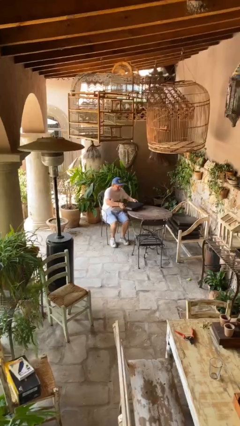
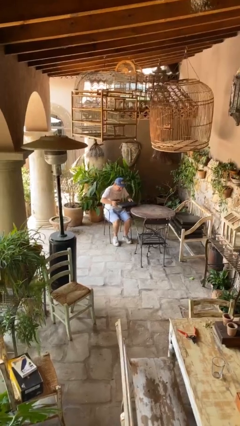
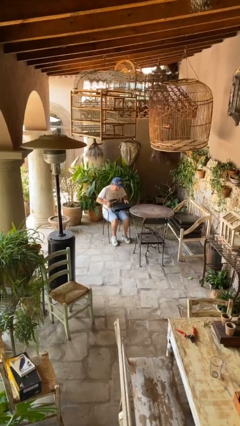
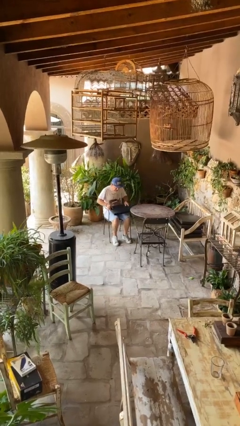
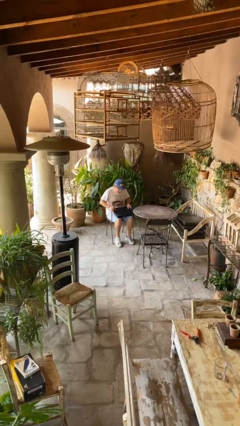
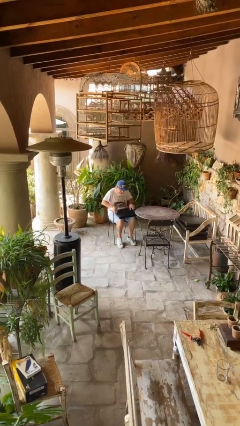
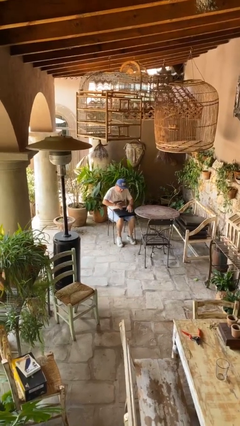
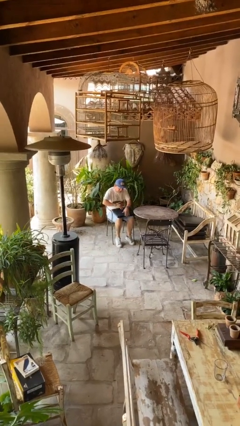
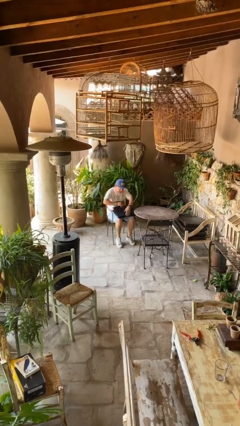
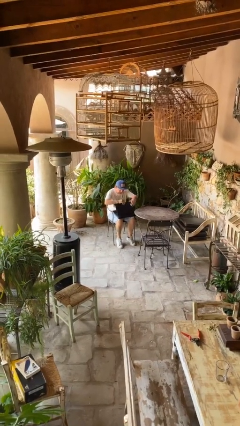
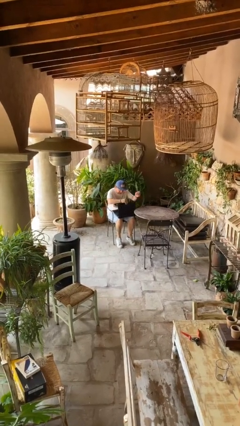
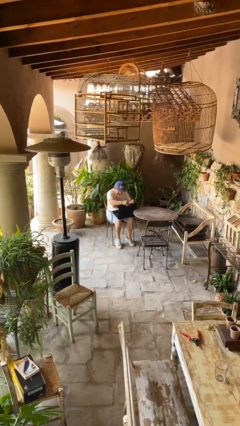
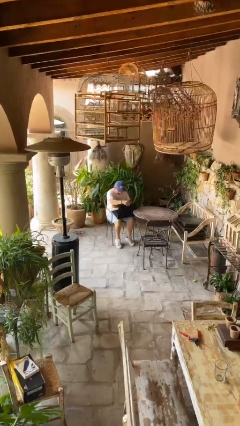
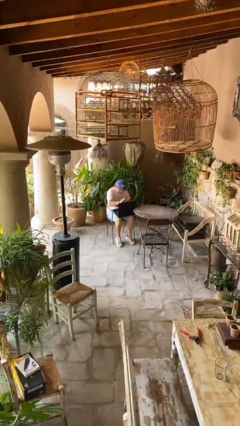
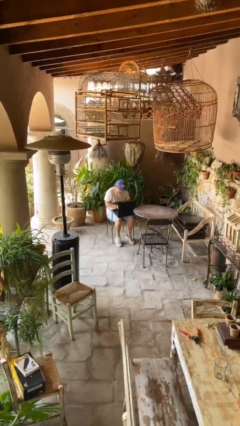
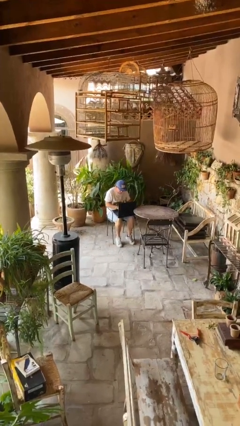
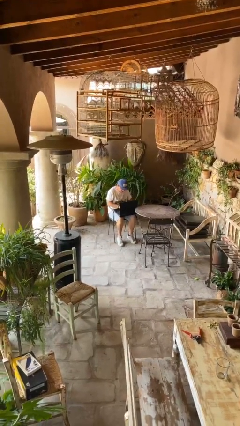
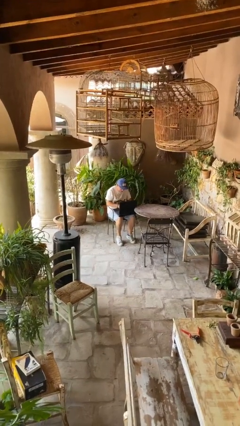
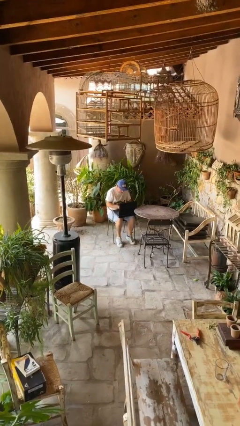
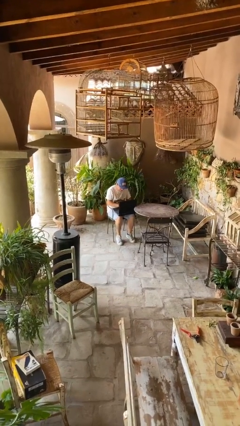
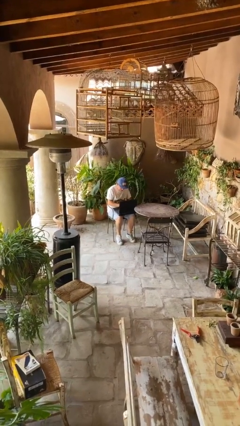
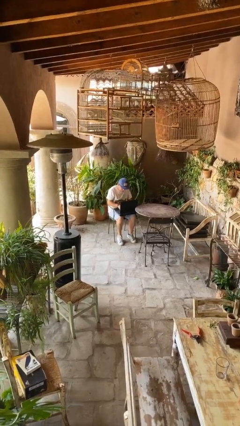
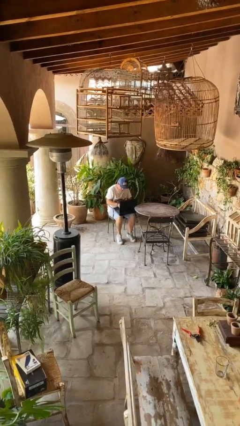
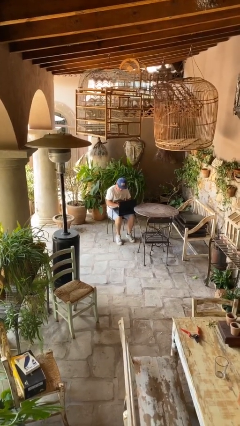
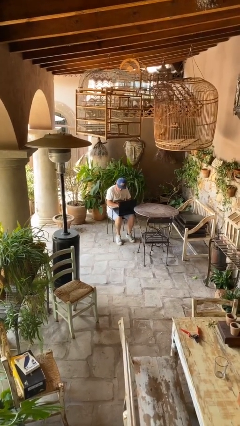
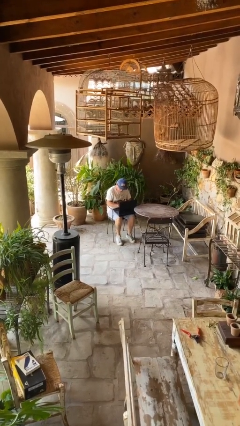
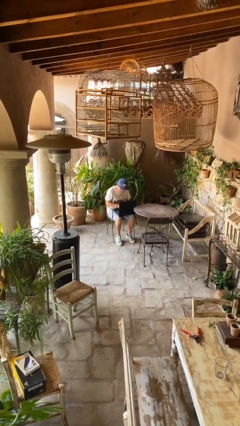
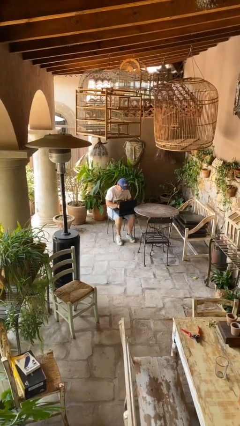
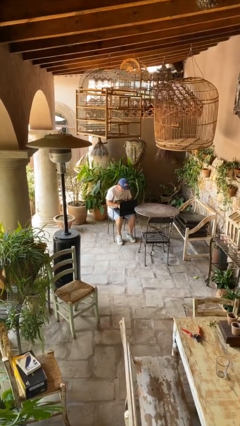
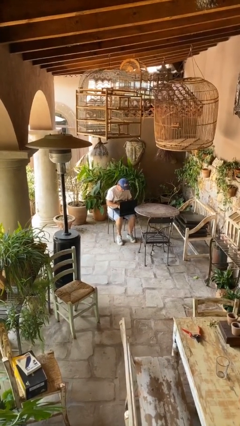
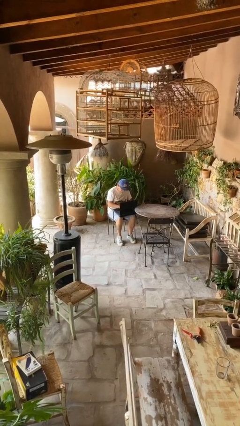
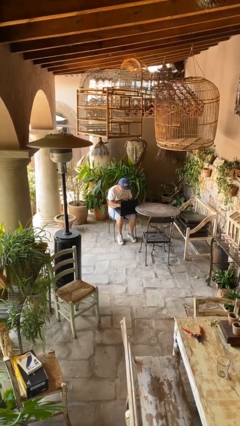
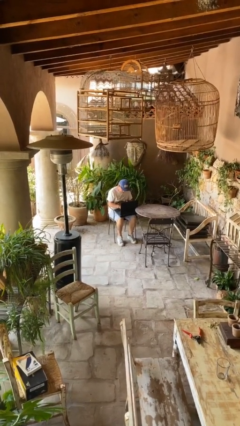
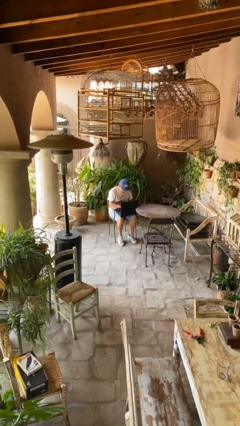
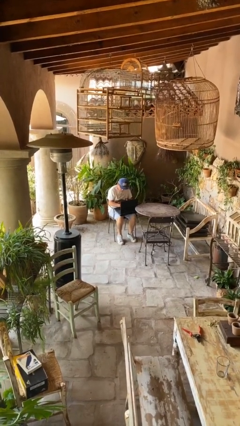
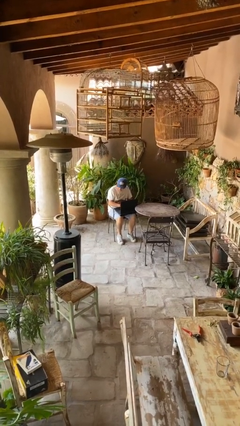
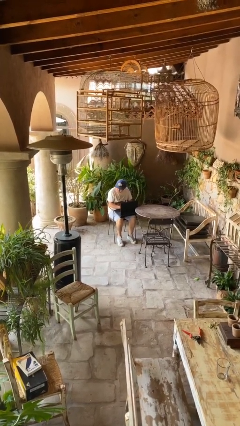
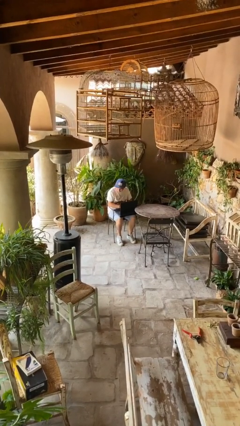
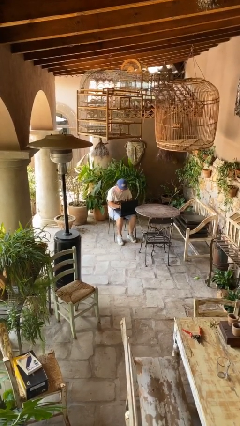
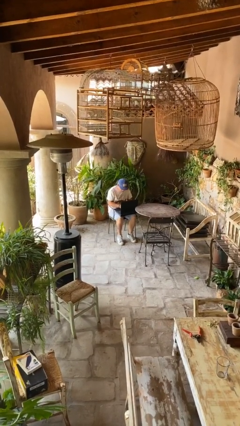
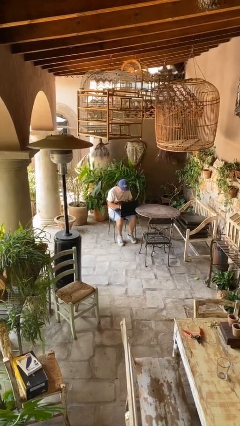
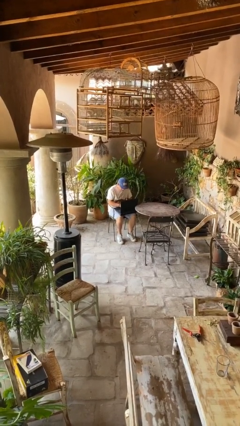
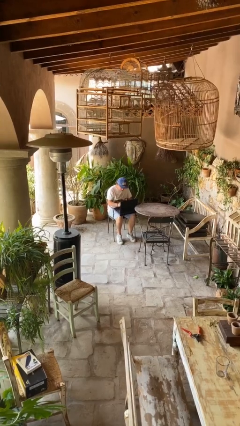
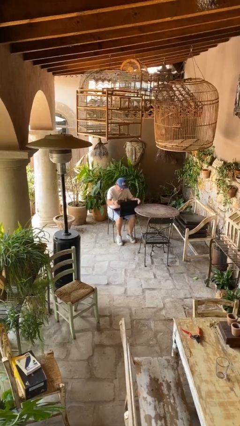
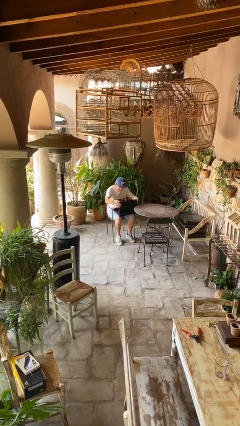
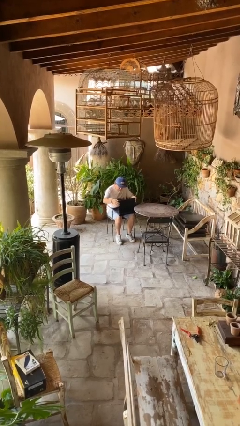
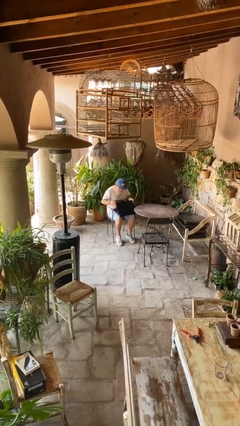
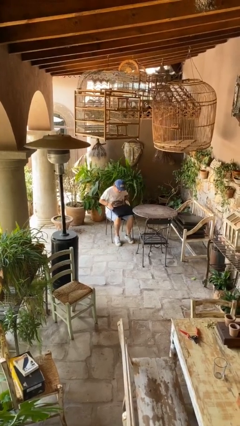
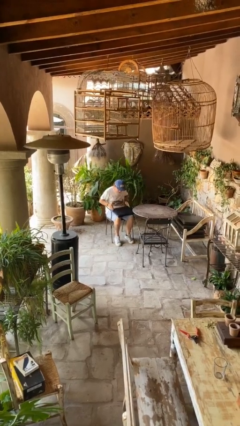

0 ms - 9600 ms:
person interacts with laptop

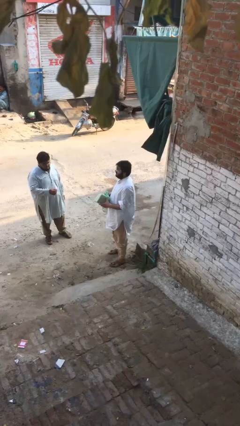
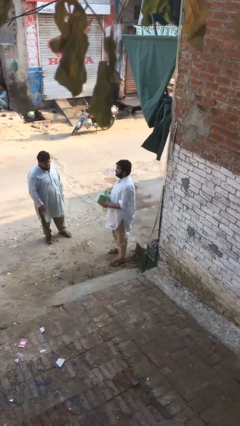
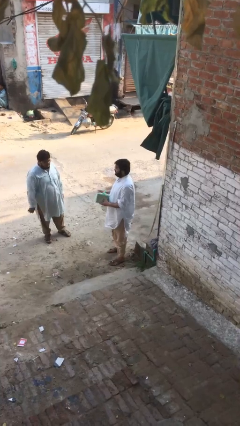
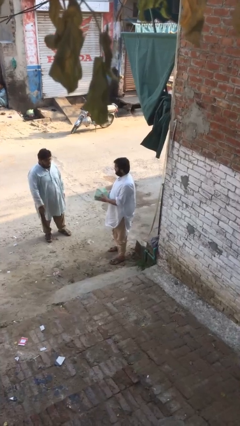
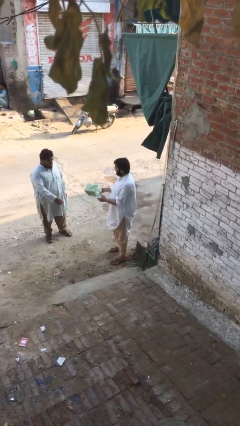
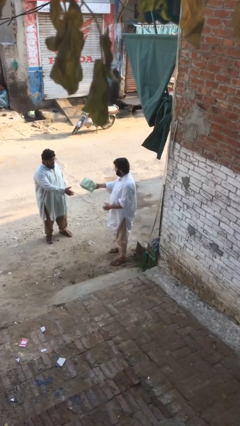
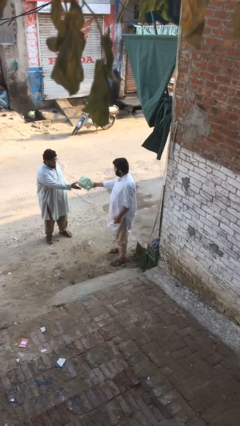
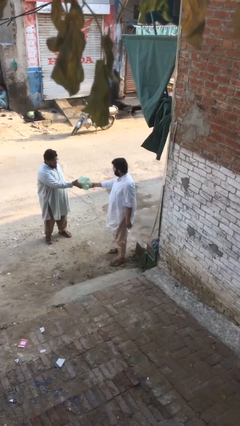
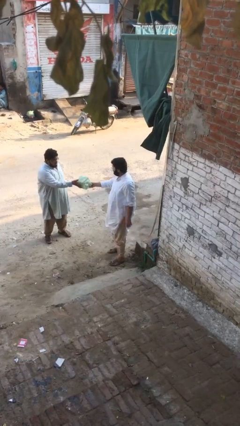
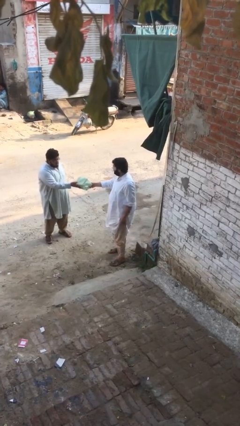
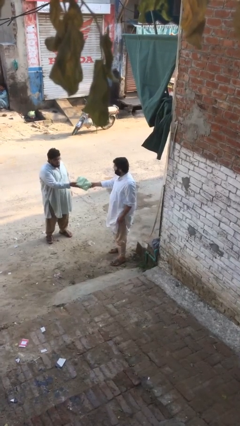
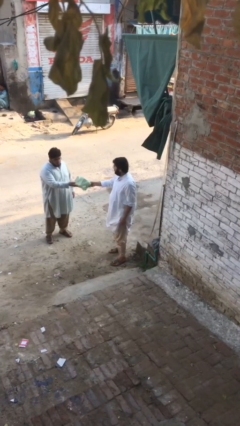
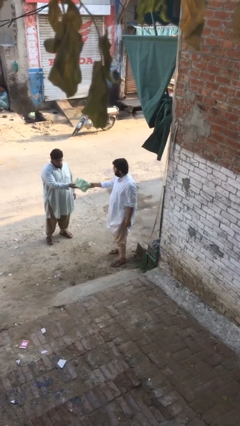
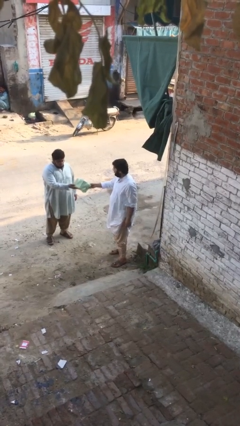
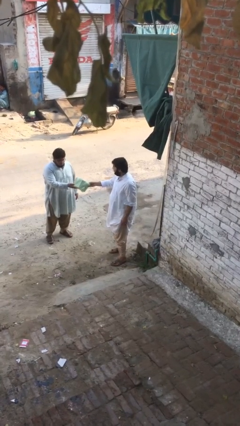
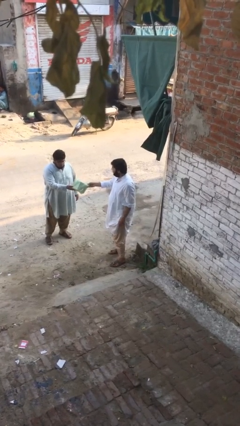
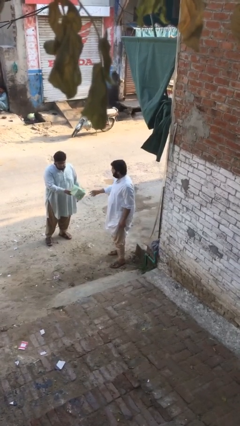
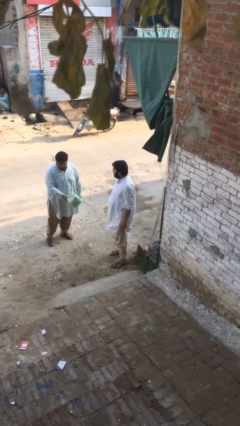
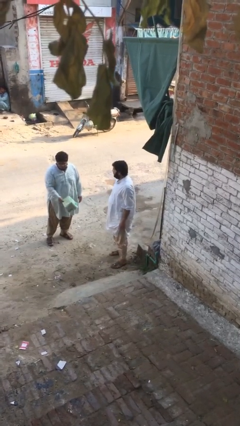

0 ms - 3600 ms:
person transfers object to person

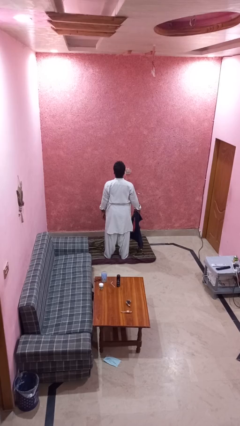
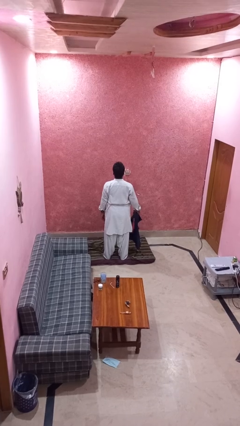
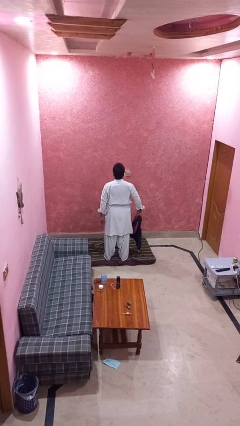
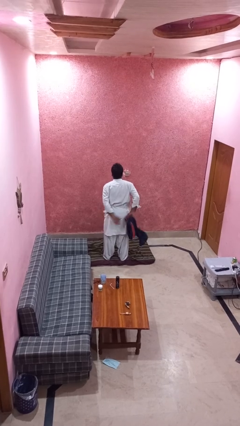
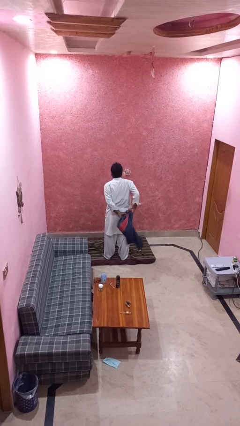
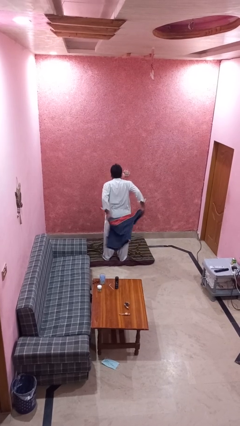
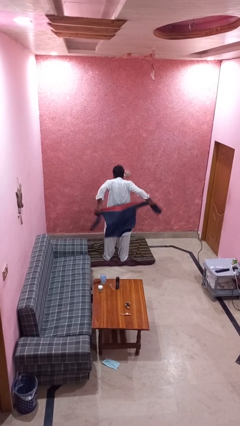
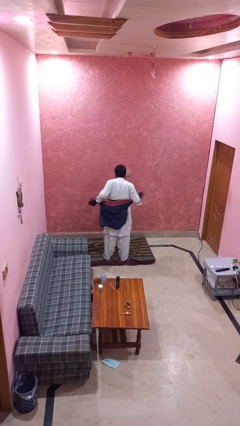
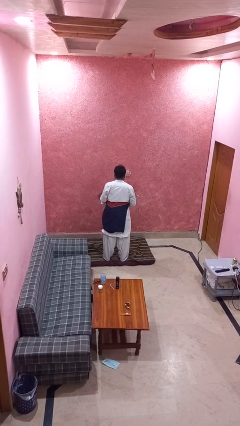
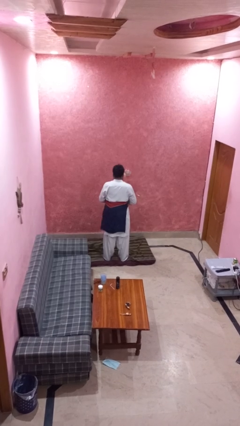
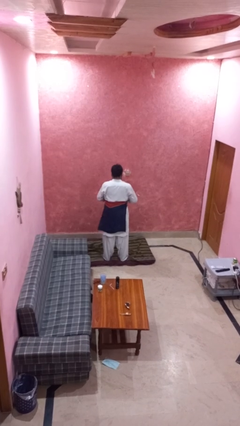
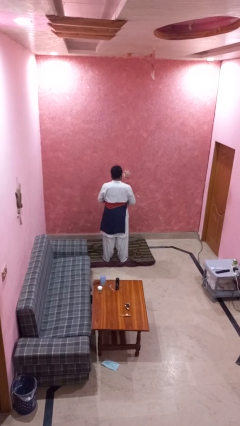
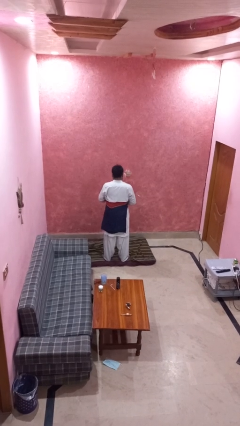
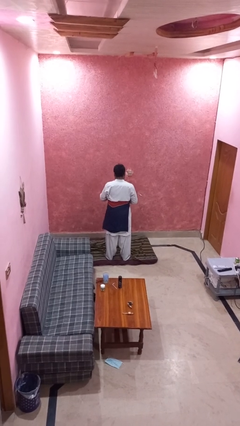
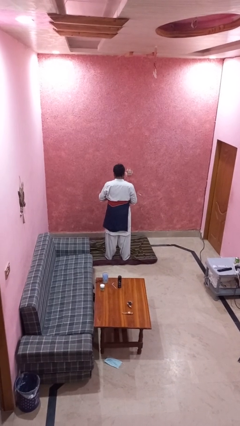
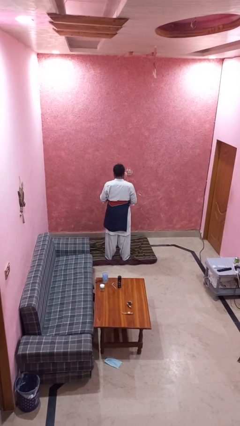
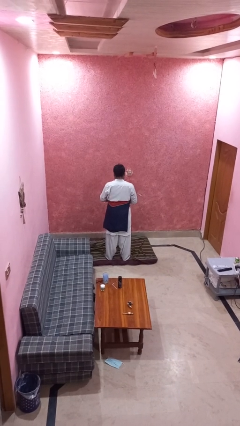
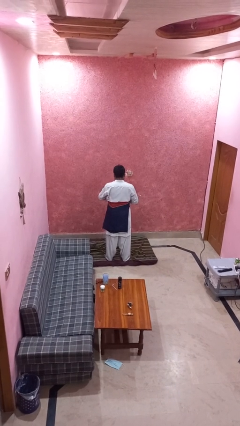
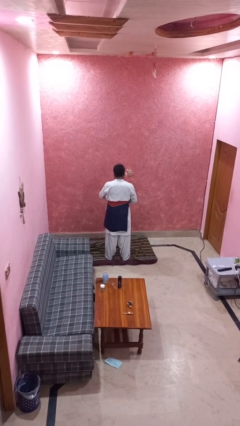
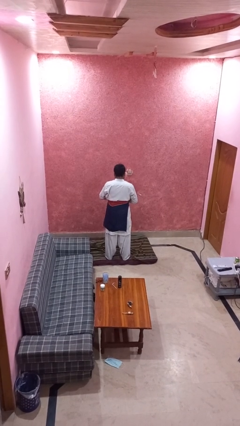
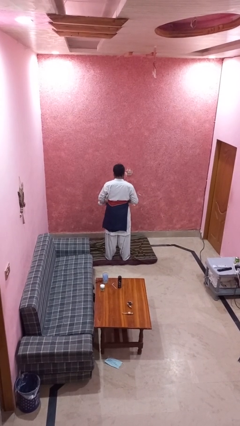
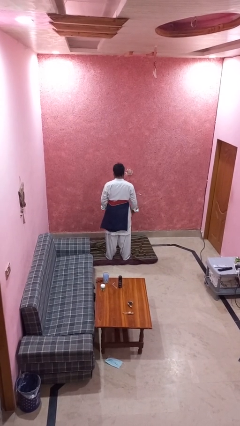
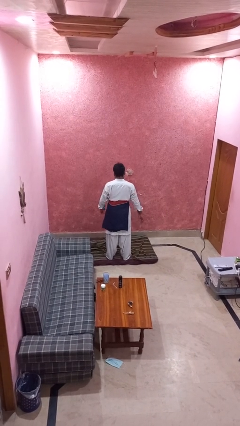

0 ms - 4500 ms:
person ties jacket around waist

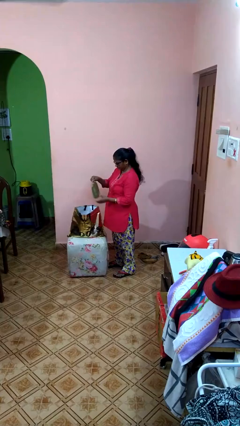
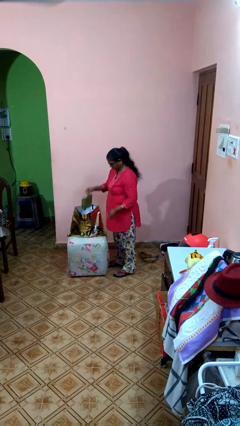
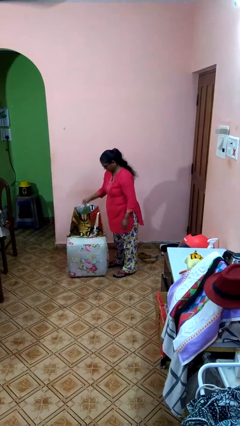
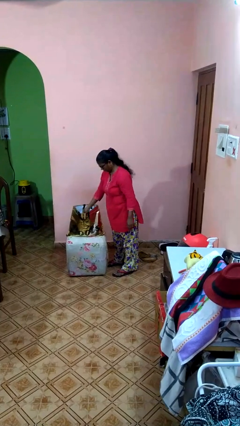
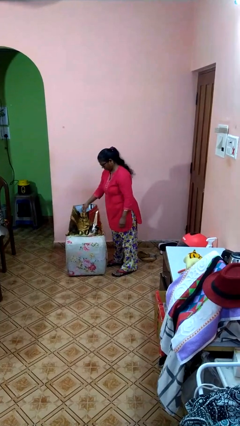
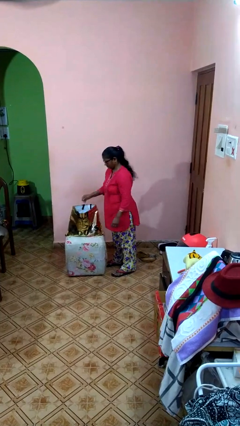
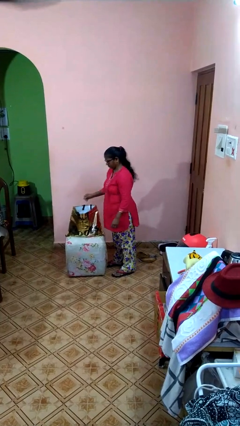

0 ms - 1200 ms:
person puts object into bag
